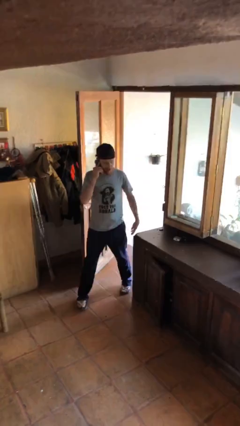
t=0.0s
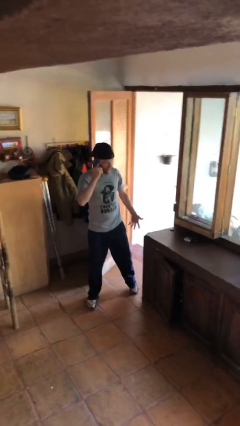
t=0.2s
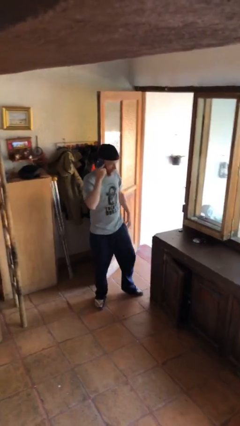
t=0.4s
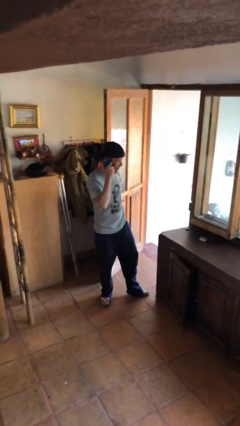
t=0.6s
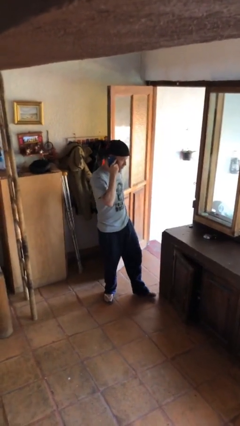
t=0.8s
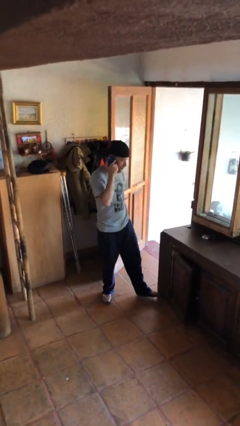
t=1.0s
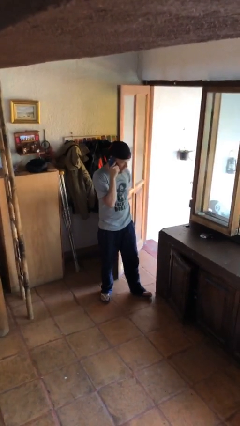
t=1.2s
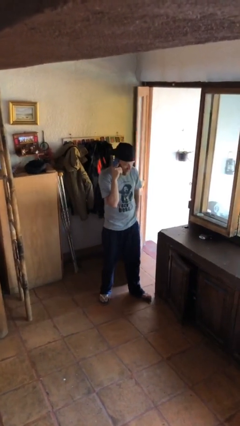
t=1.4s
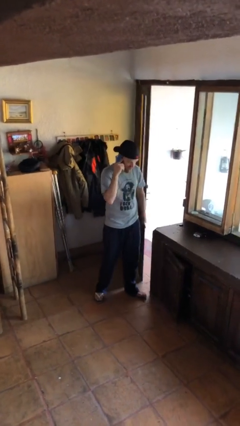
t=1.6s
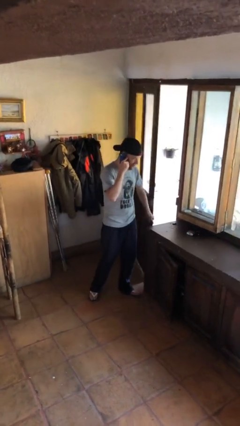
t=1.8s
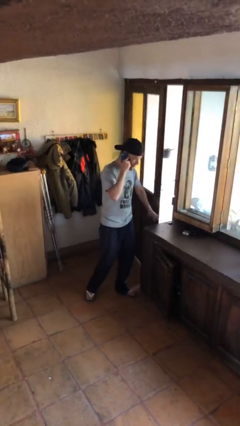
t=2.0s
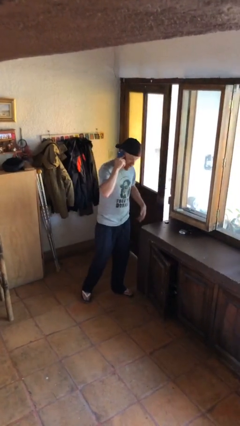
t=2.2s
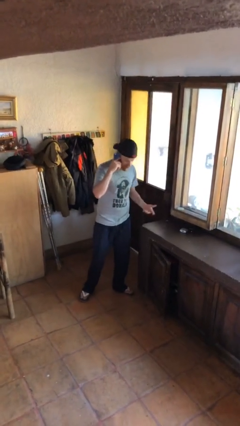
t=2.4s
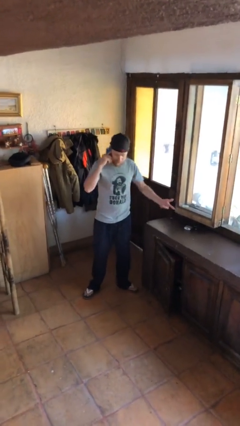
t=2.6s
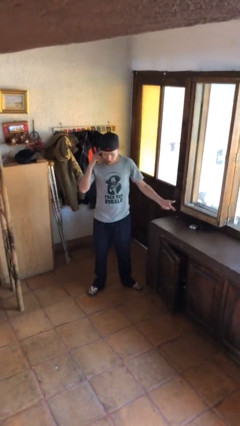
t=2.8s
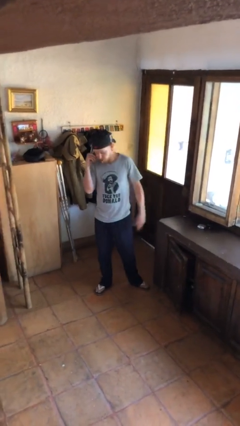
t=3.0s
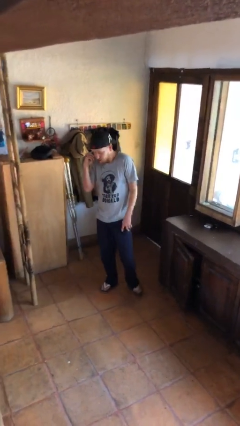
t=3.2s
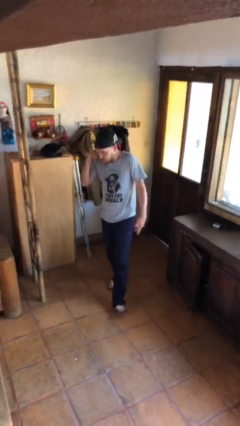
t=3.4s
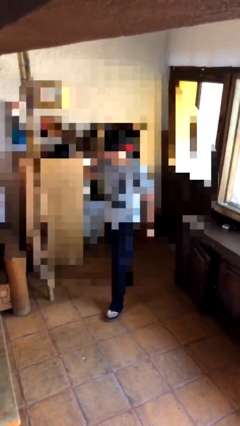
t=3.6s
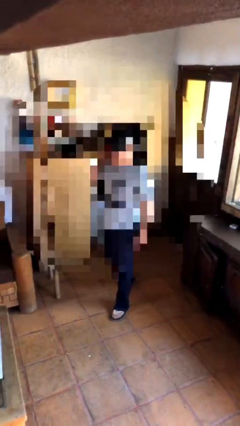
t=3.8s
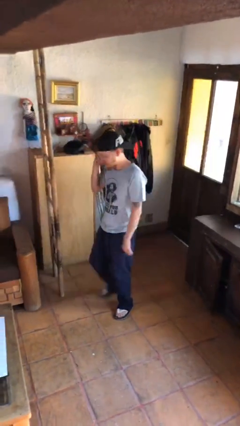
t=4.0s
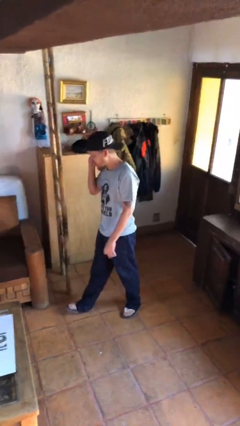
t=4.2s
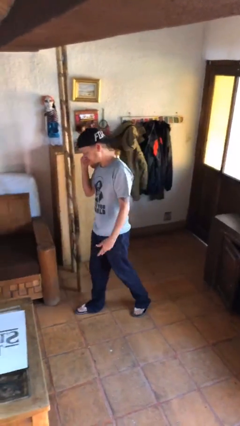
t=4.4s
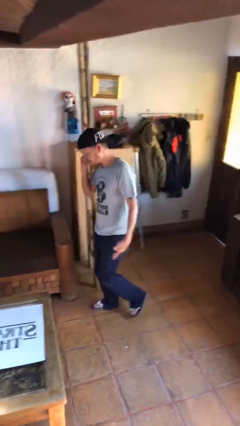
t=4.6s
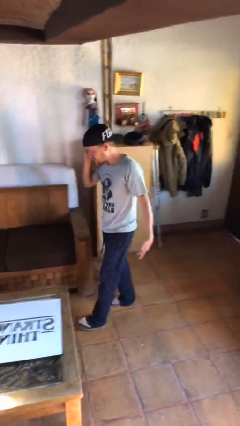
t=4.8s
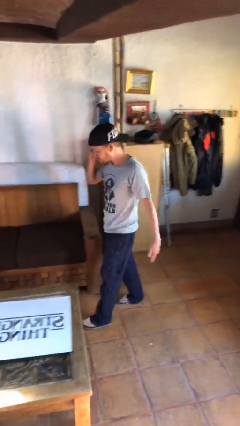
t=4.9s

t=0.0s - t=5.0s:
person closes facility door

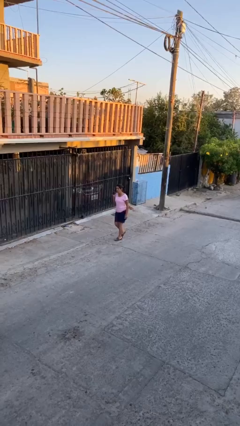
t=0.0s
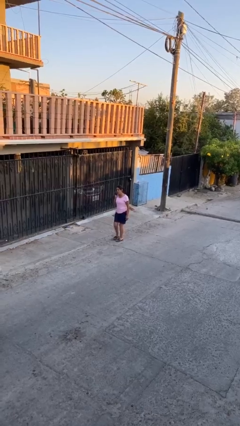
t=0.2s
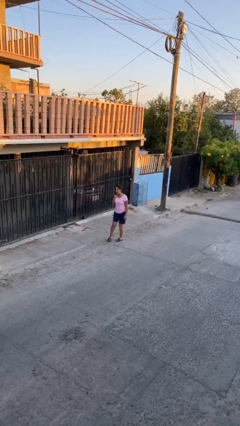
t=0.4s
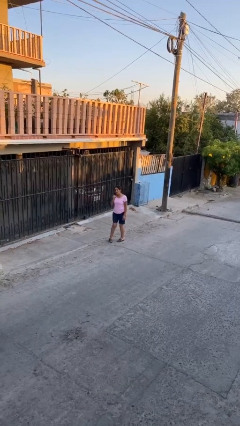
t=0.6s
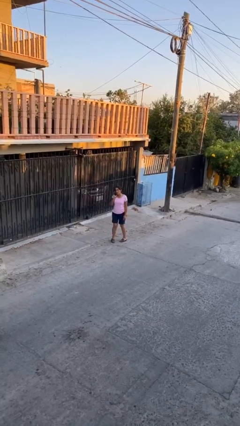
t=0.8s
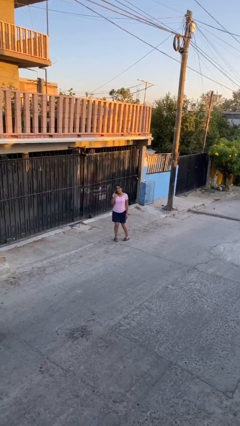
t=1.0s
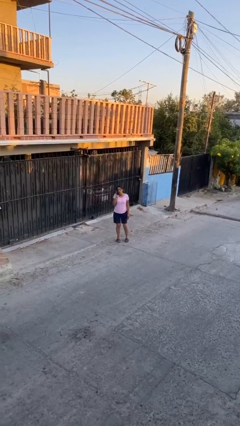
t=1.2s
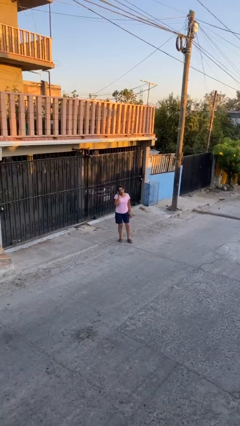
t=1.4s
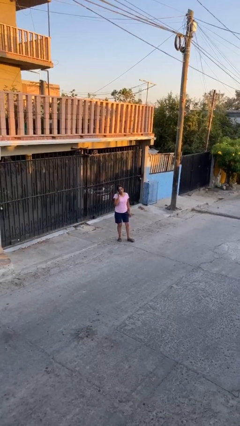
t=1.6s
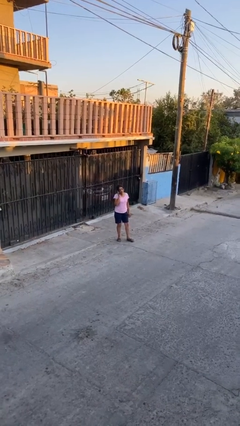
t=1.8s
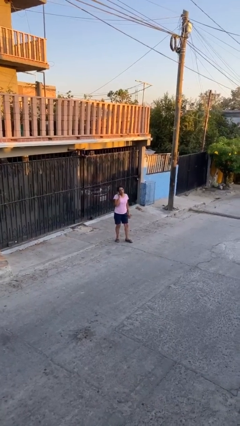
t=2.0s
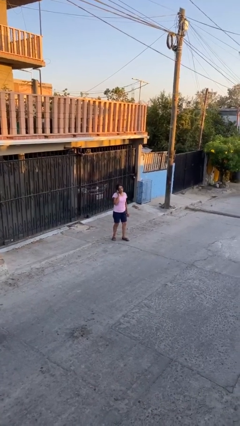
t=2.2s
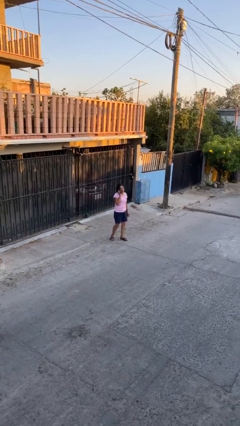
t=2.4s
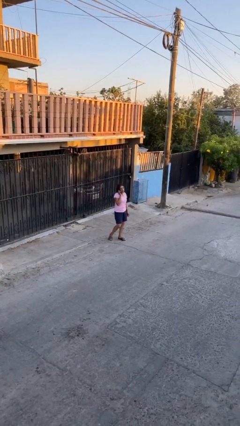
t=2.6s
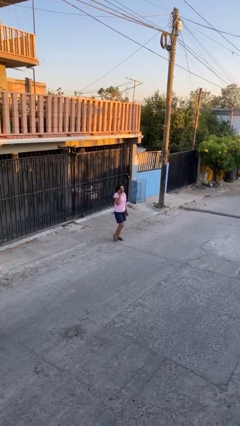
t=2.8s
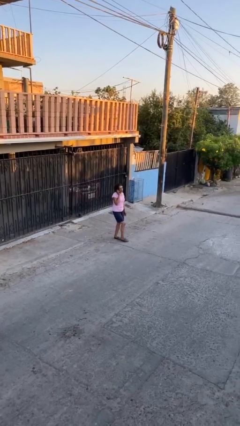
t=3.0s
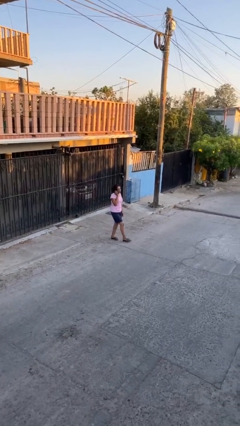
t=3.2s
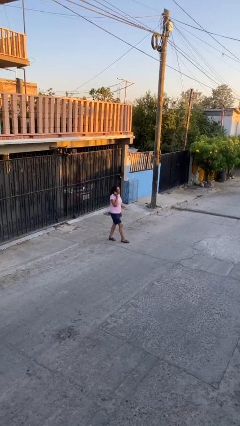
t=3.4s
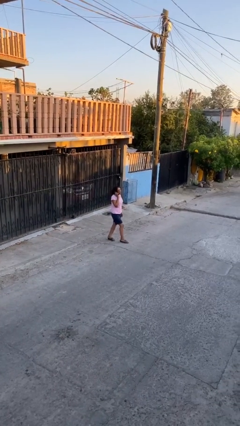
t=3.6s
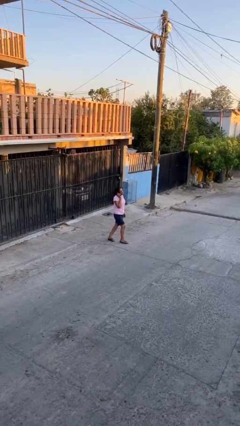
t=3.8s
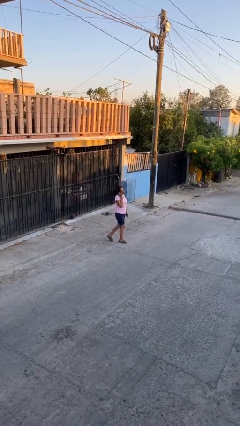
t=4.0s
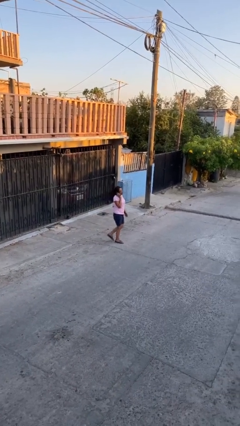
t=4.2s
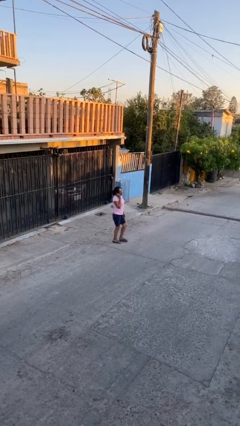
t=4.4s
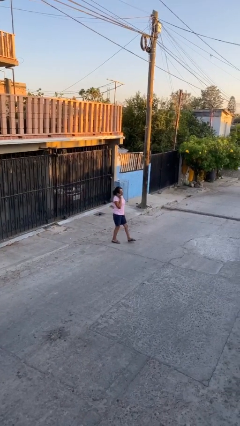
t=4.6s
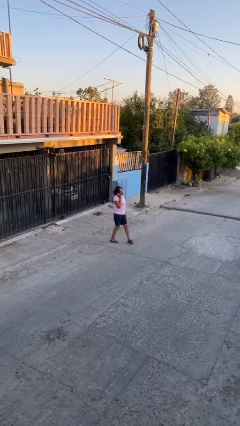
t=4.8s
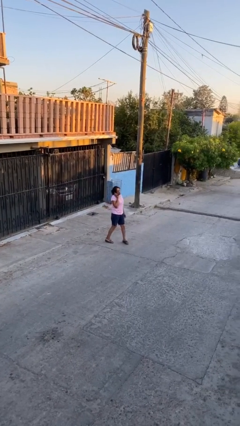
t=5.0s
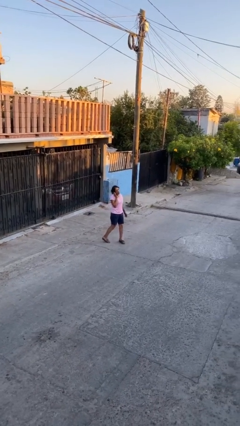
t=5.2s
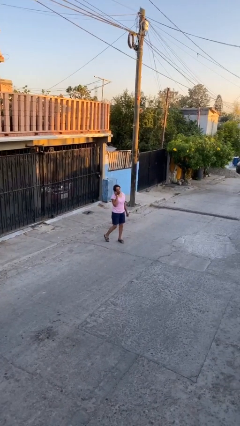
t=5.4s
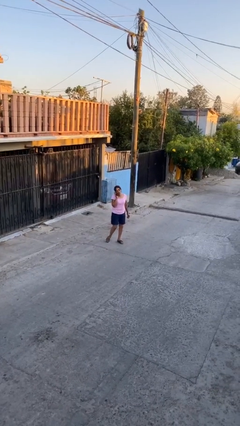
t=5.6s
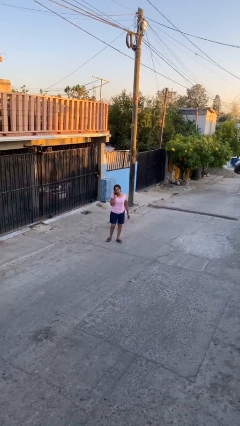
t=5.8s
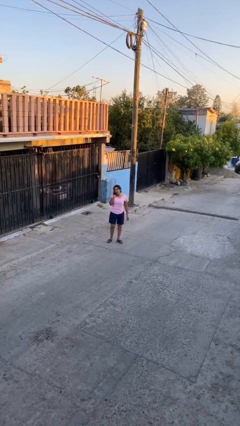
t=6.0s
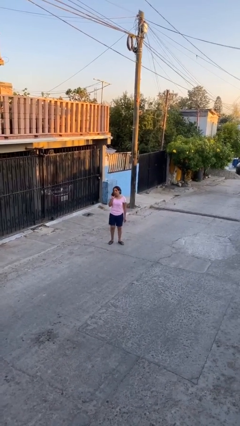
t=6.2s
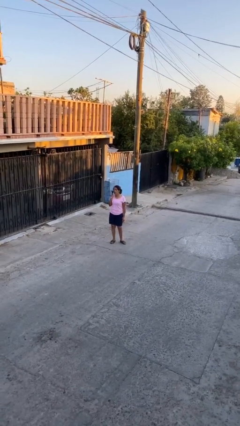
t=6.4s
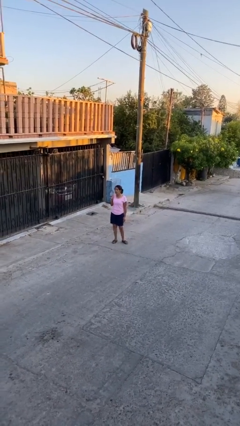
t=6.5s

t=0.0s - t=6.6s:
person talks on phone

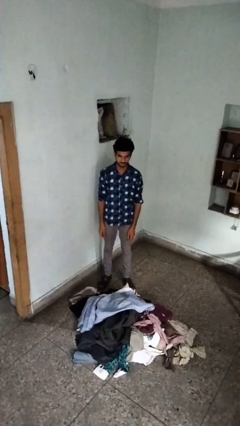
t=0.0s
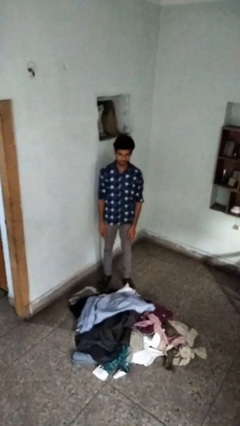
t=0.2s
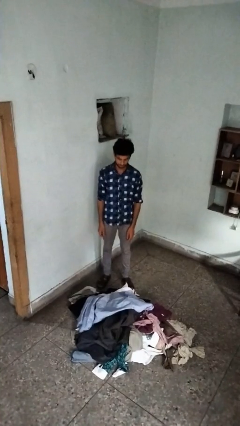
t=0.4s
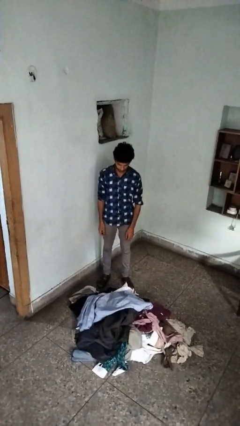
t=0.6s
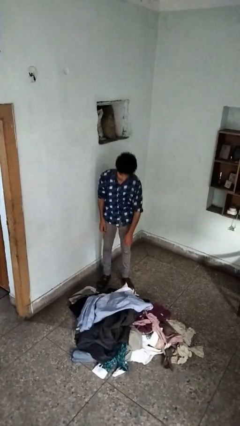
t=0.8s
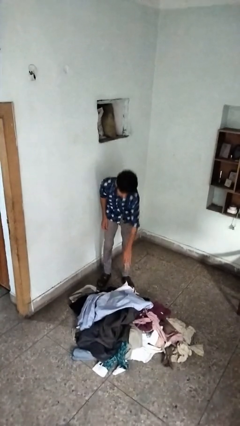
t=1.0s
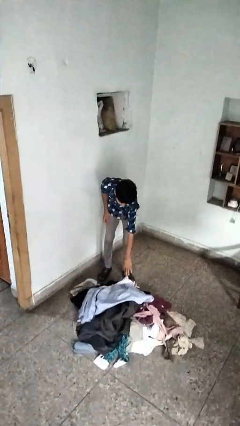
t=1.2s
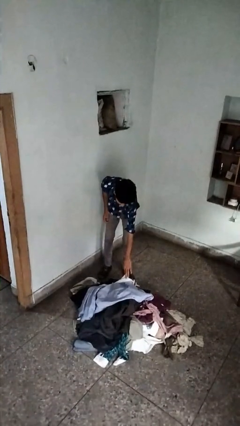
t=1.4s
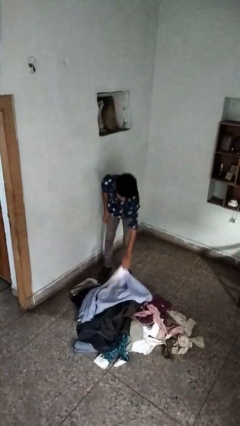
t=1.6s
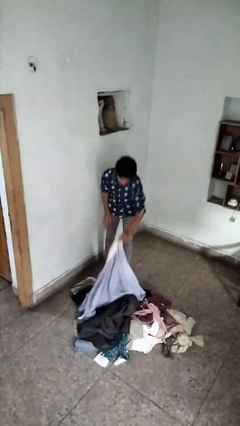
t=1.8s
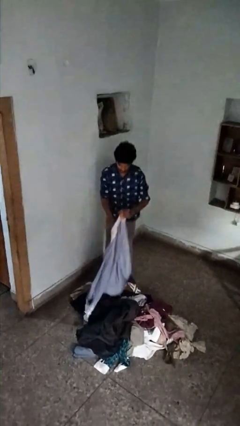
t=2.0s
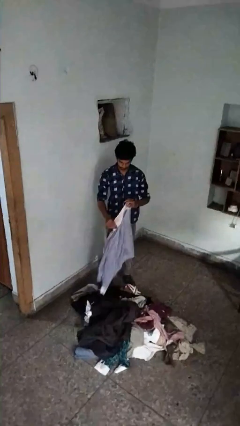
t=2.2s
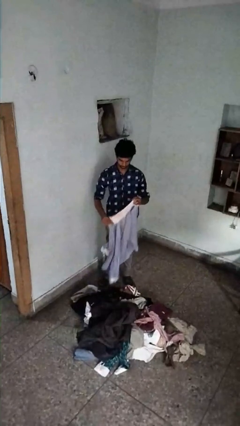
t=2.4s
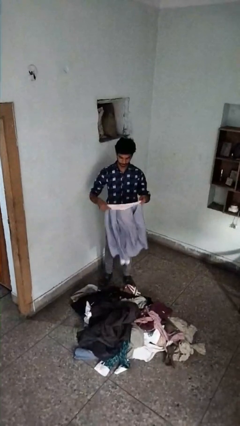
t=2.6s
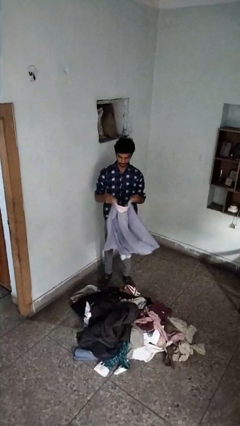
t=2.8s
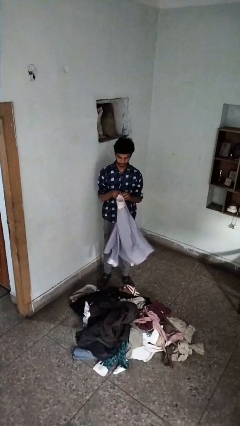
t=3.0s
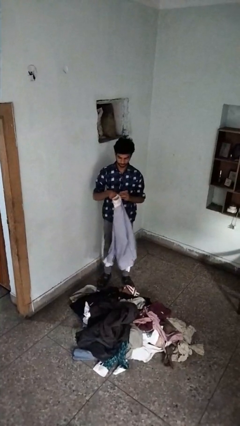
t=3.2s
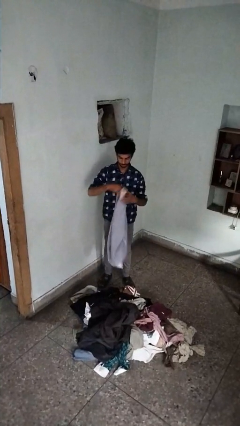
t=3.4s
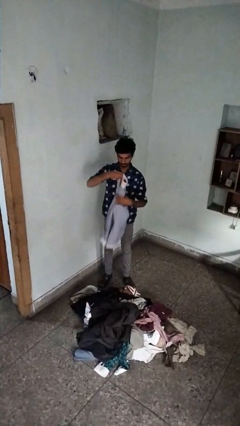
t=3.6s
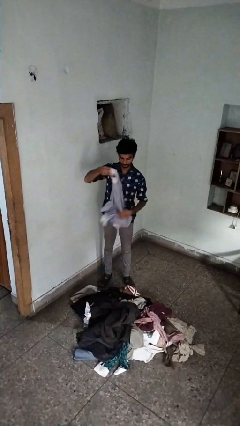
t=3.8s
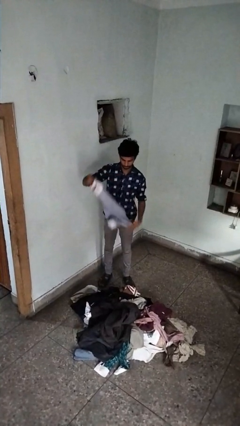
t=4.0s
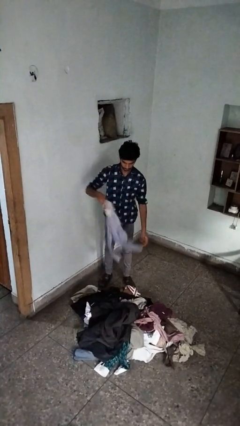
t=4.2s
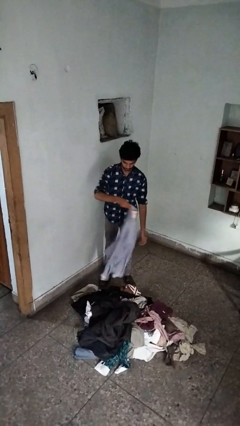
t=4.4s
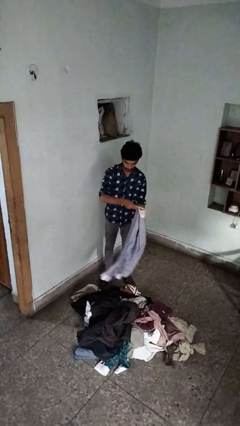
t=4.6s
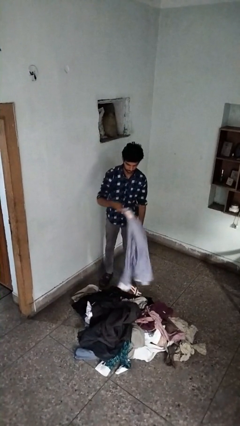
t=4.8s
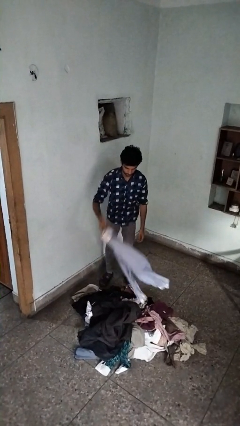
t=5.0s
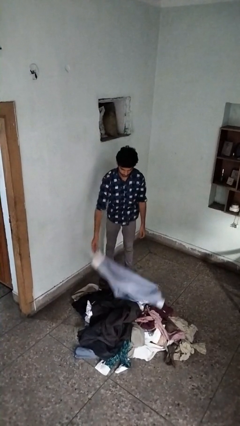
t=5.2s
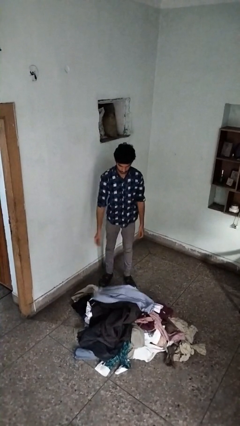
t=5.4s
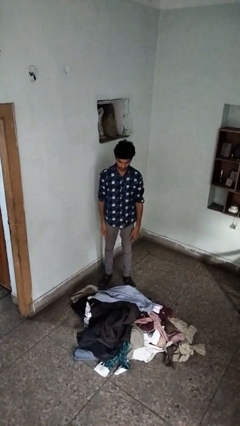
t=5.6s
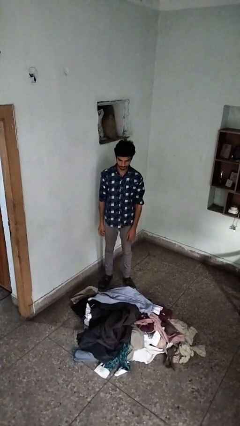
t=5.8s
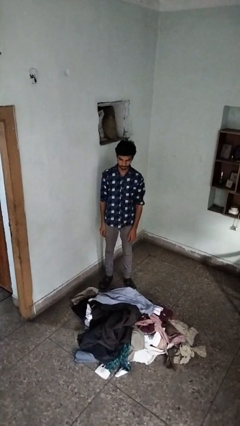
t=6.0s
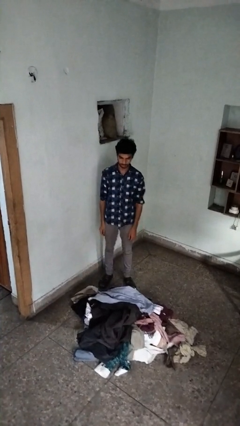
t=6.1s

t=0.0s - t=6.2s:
person folds shirt
